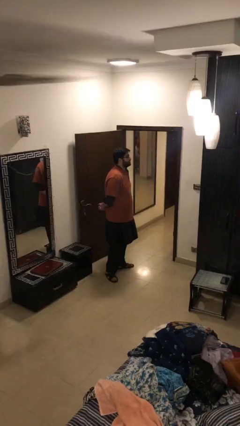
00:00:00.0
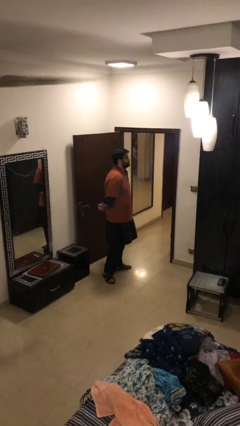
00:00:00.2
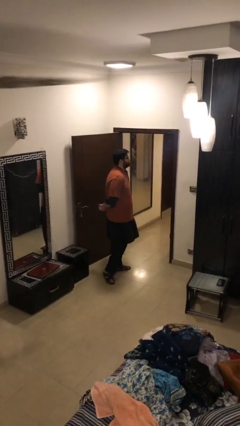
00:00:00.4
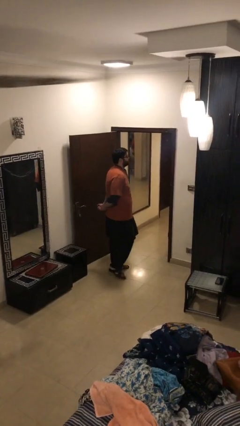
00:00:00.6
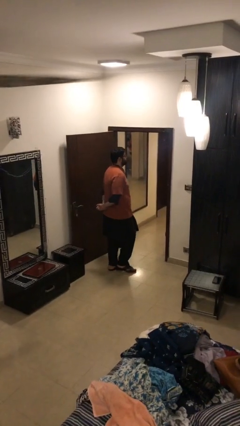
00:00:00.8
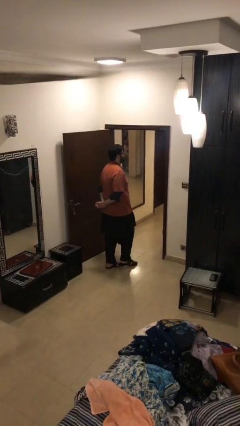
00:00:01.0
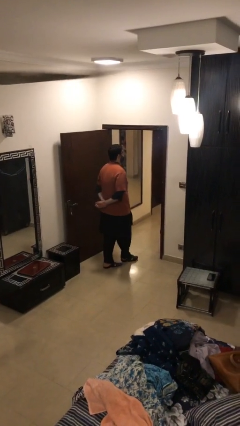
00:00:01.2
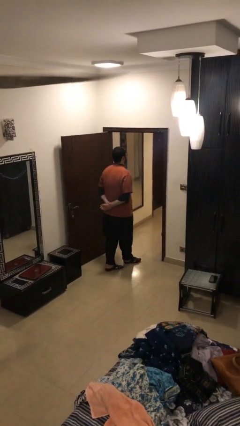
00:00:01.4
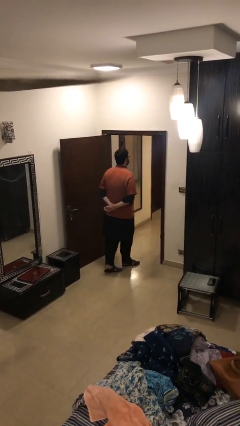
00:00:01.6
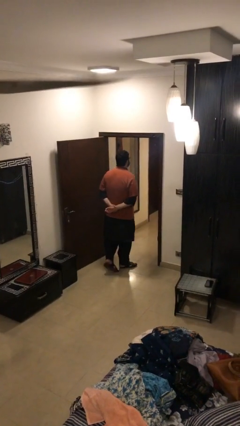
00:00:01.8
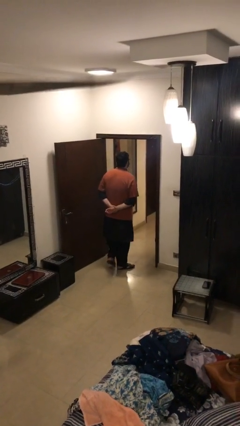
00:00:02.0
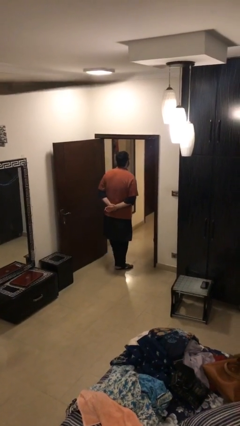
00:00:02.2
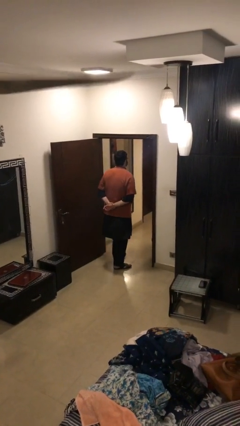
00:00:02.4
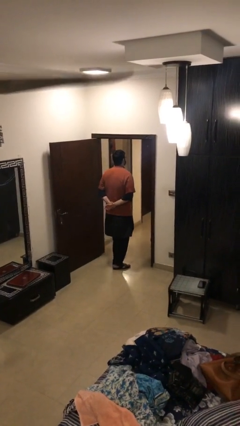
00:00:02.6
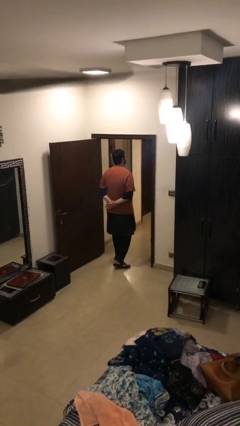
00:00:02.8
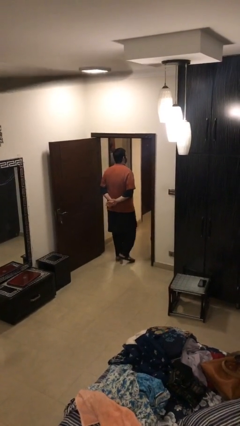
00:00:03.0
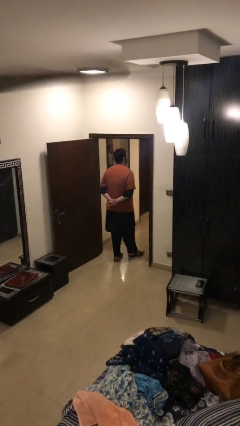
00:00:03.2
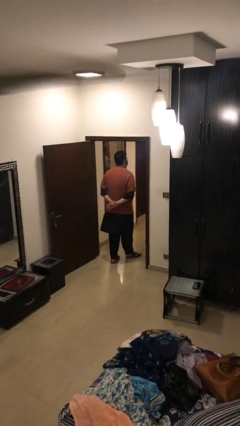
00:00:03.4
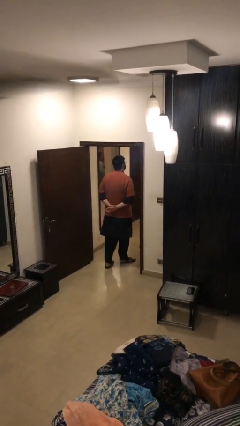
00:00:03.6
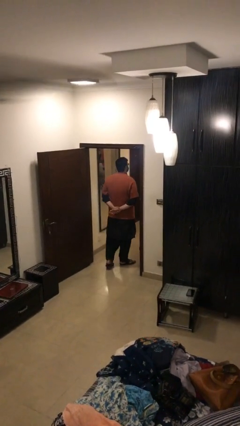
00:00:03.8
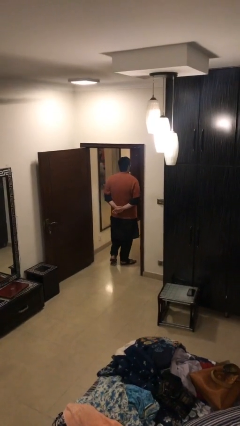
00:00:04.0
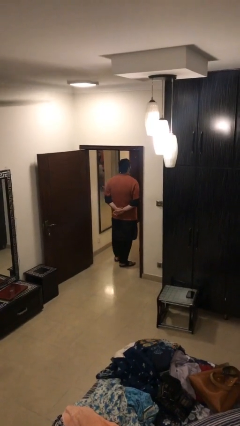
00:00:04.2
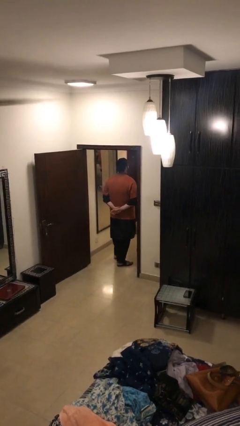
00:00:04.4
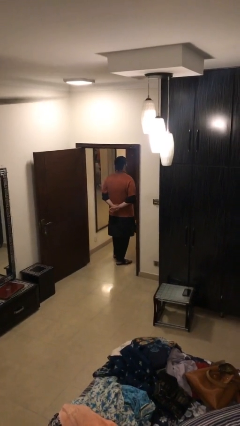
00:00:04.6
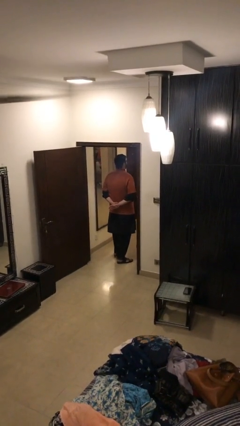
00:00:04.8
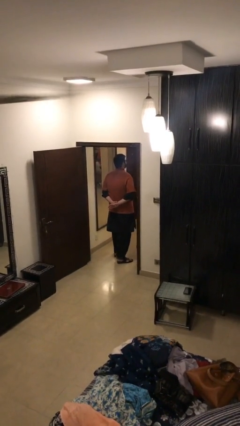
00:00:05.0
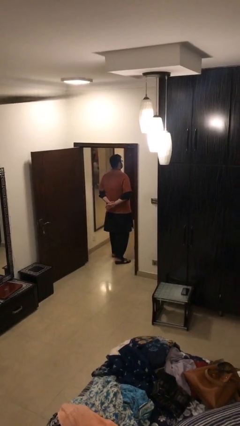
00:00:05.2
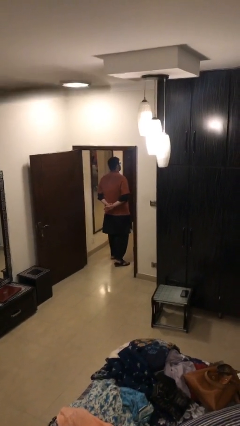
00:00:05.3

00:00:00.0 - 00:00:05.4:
person exits scene through structure

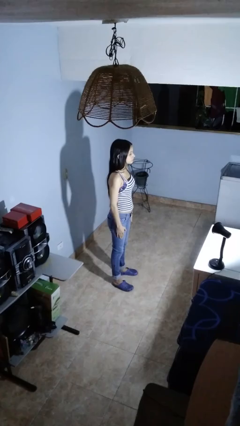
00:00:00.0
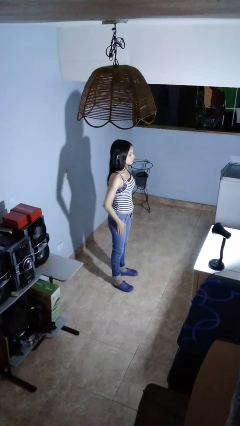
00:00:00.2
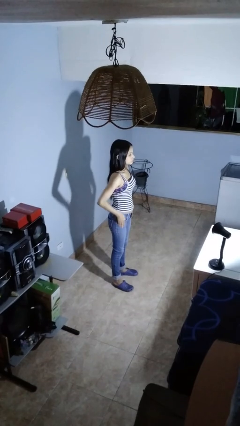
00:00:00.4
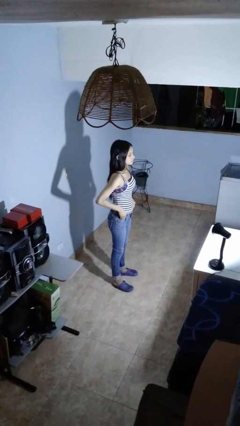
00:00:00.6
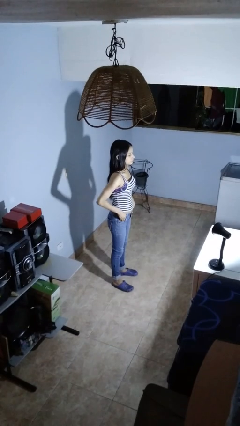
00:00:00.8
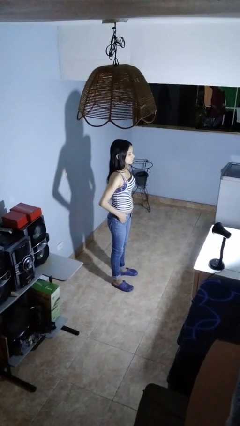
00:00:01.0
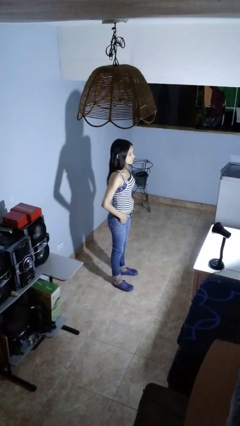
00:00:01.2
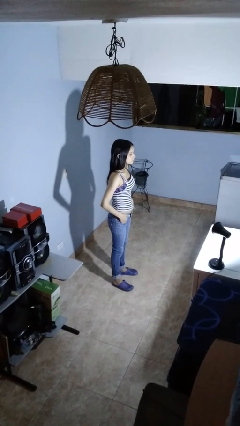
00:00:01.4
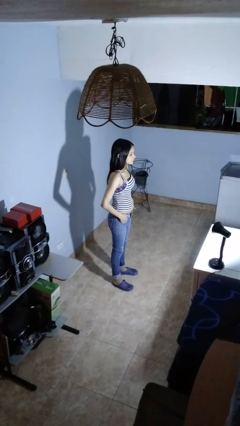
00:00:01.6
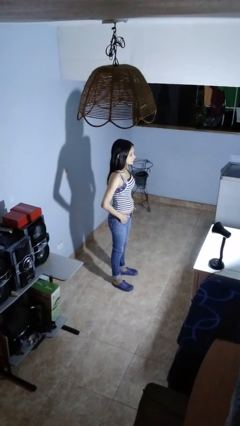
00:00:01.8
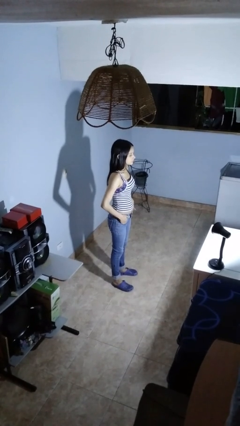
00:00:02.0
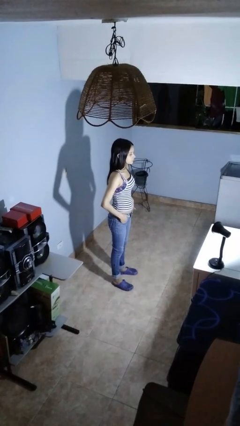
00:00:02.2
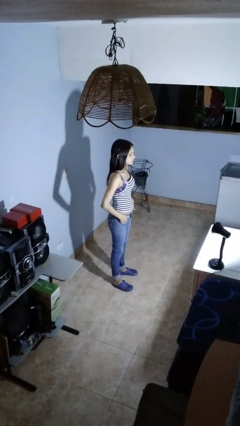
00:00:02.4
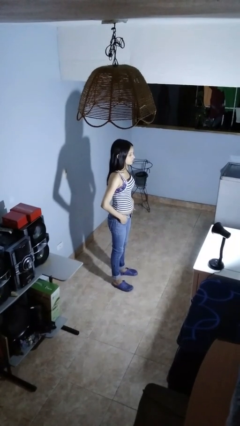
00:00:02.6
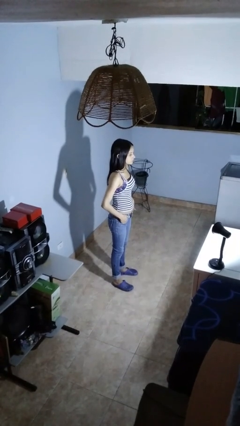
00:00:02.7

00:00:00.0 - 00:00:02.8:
person puts hands in back pockets

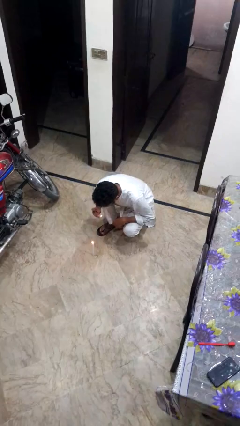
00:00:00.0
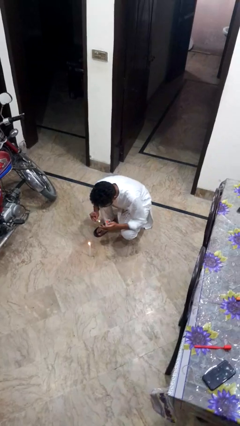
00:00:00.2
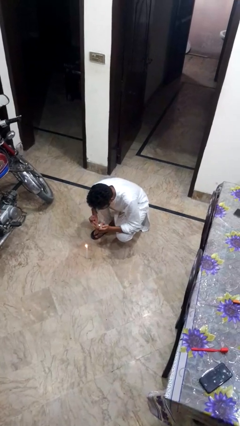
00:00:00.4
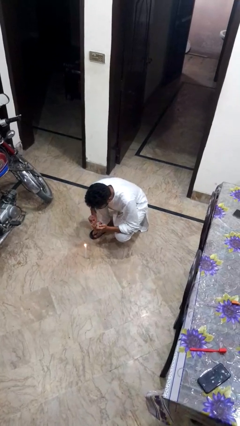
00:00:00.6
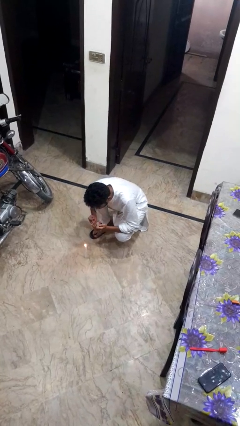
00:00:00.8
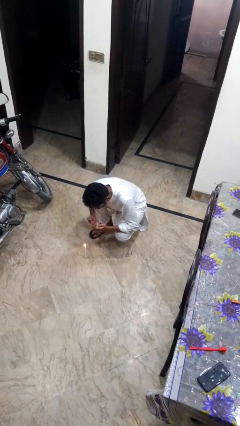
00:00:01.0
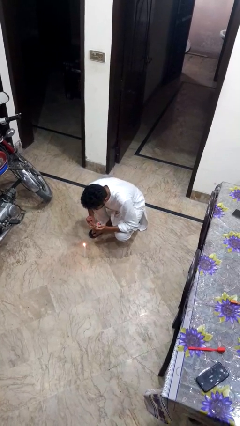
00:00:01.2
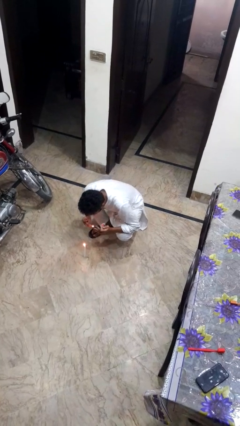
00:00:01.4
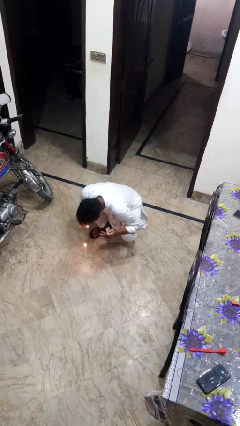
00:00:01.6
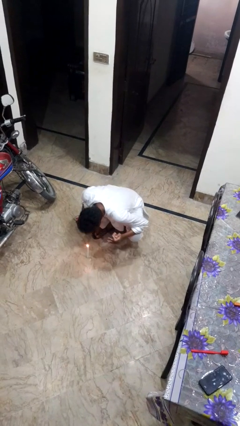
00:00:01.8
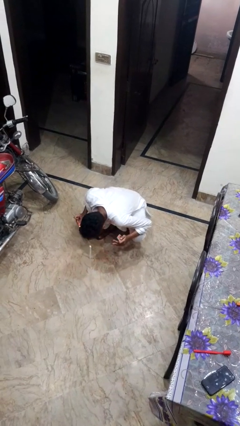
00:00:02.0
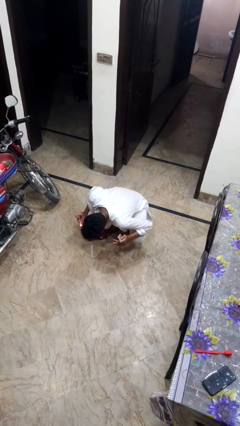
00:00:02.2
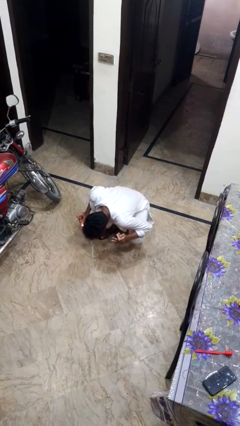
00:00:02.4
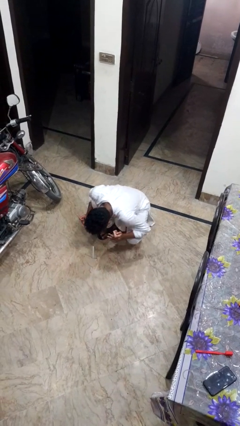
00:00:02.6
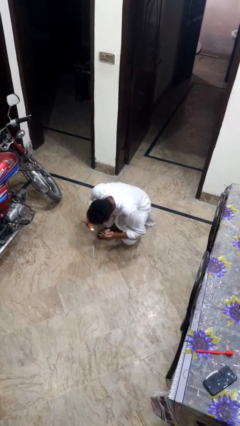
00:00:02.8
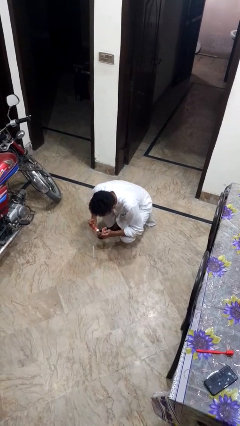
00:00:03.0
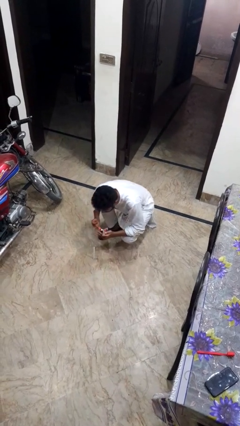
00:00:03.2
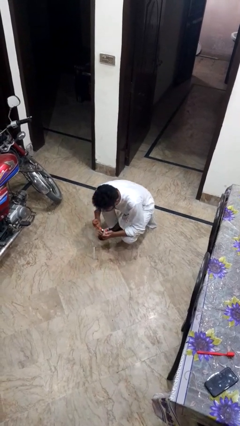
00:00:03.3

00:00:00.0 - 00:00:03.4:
person extinguishes candle

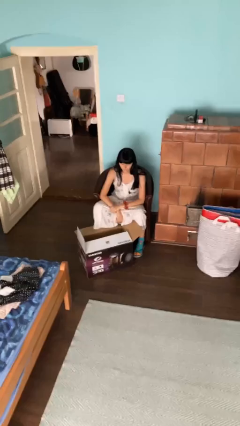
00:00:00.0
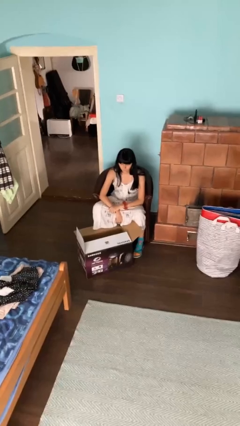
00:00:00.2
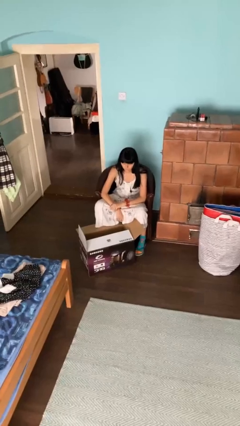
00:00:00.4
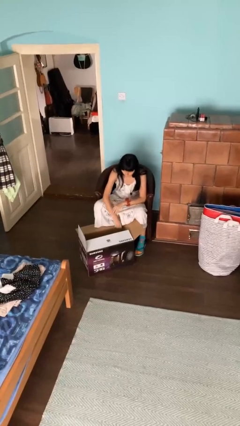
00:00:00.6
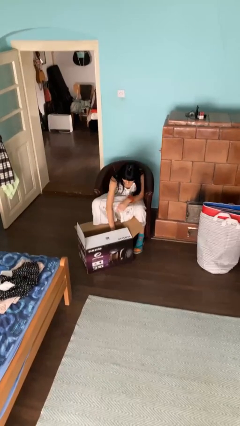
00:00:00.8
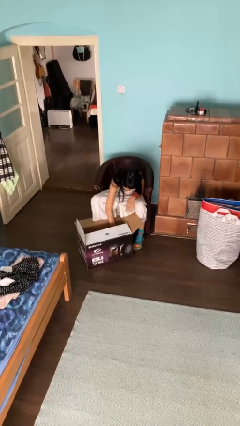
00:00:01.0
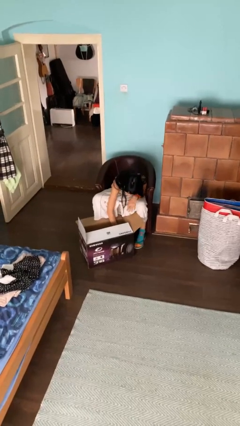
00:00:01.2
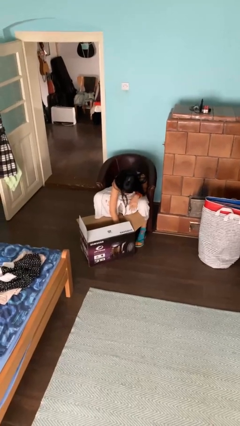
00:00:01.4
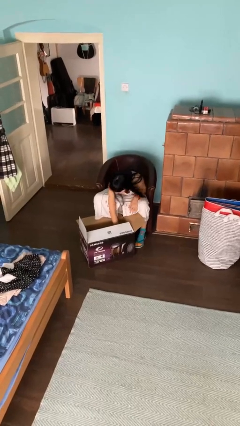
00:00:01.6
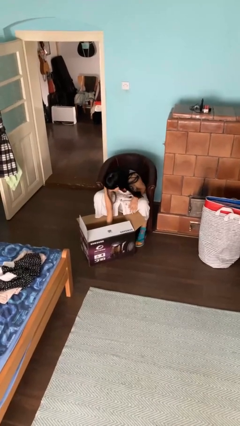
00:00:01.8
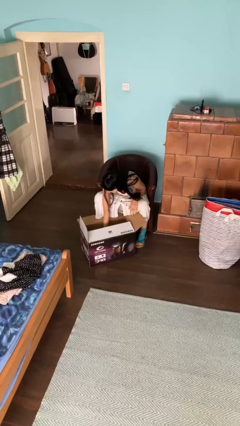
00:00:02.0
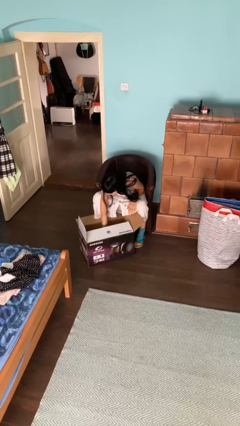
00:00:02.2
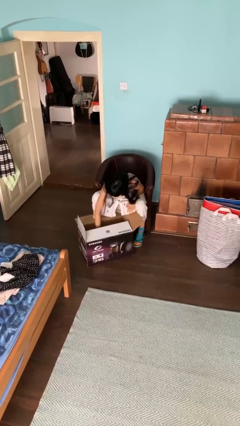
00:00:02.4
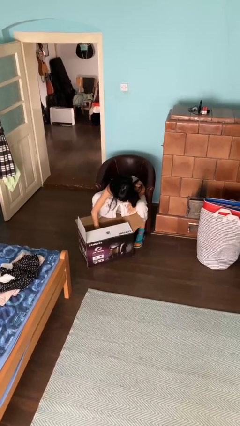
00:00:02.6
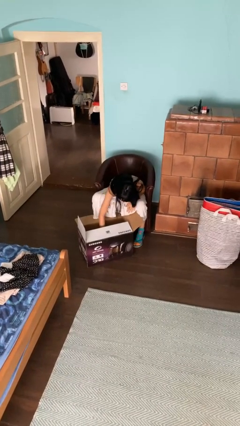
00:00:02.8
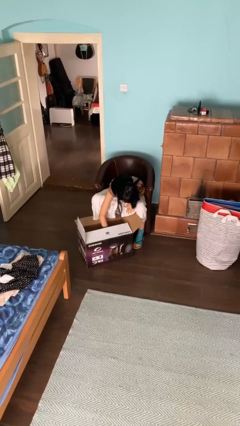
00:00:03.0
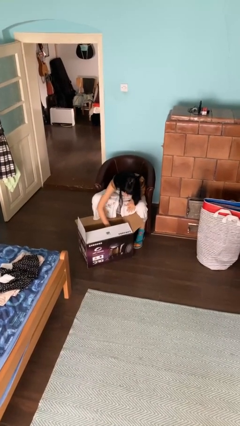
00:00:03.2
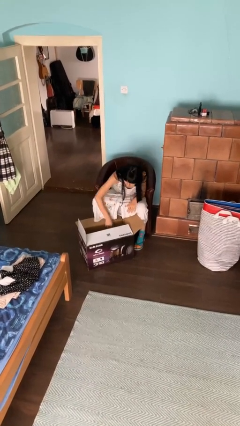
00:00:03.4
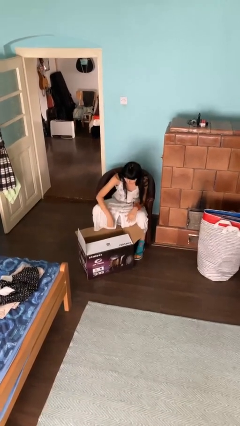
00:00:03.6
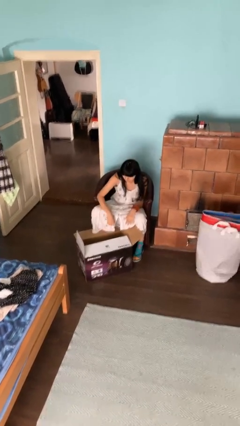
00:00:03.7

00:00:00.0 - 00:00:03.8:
person searches in box

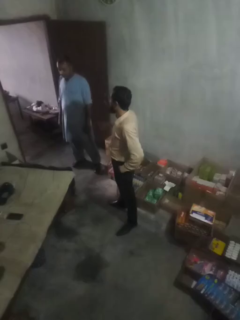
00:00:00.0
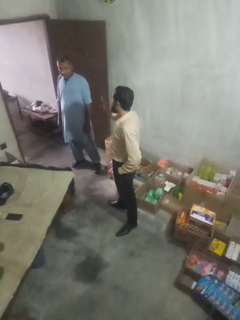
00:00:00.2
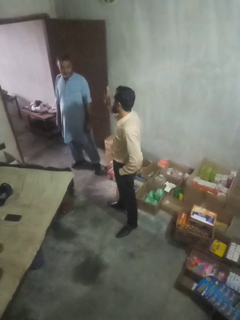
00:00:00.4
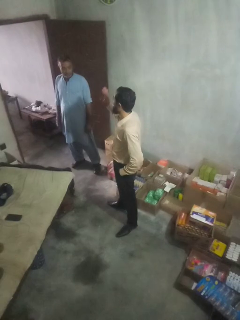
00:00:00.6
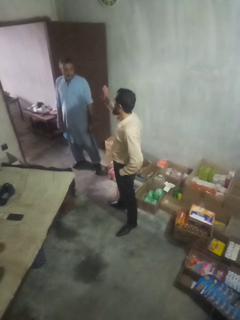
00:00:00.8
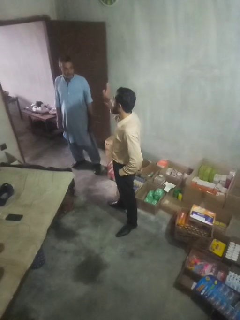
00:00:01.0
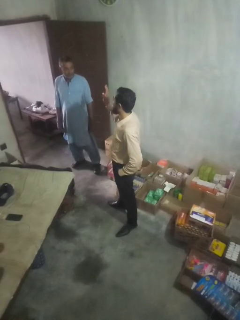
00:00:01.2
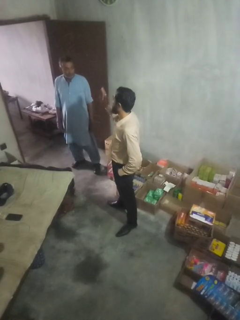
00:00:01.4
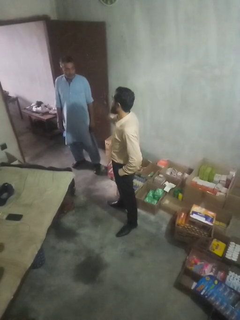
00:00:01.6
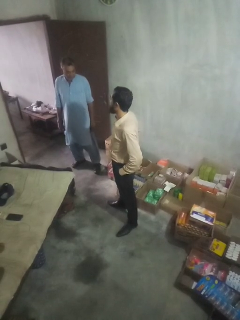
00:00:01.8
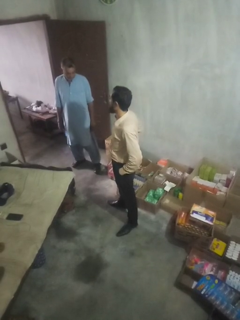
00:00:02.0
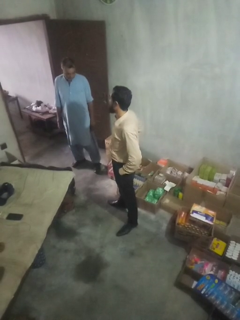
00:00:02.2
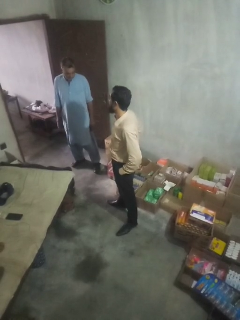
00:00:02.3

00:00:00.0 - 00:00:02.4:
person waves at person

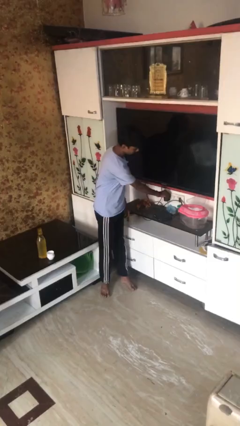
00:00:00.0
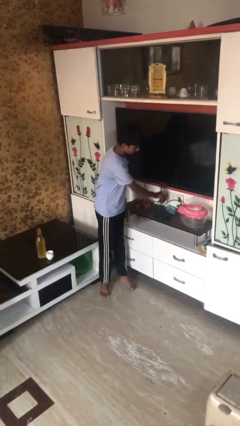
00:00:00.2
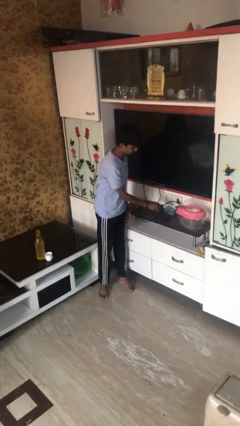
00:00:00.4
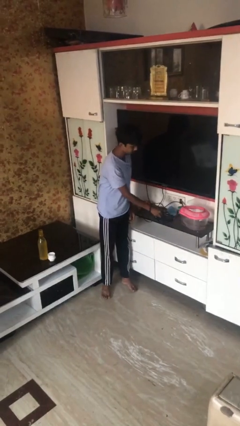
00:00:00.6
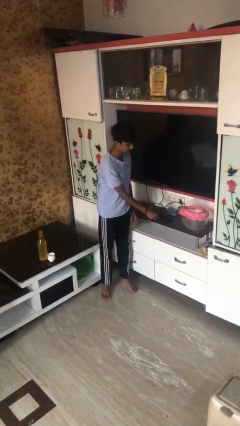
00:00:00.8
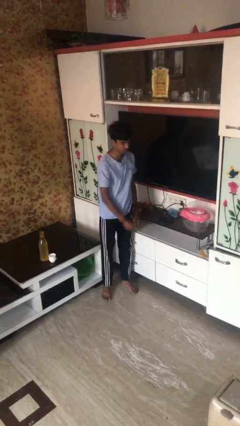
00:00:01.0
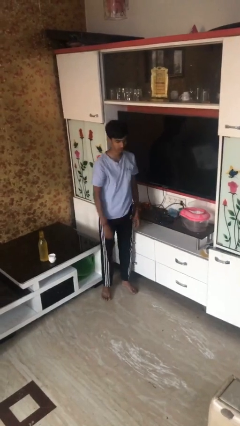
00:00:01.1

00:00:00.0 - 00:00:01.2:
person unplugs from electrical socket
